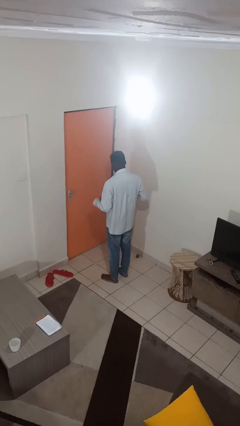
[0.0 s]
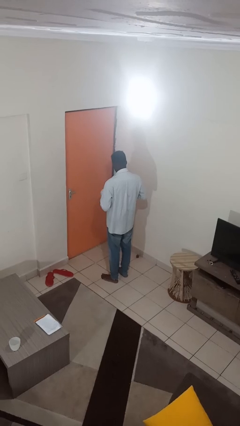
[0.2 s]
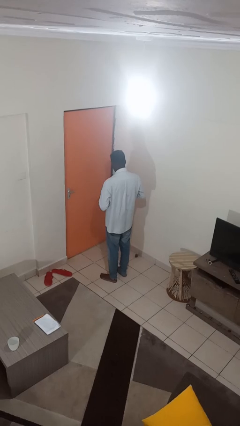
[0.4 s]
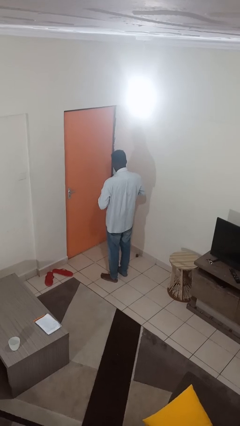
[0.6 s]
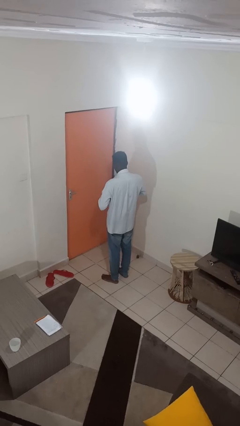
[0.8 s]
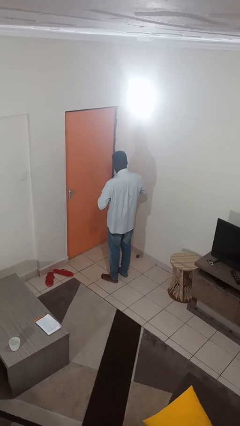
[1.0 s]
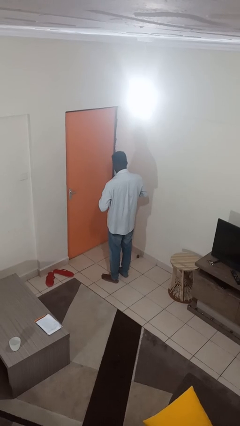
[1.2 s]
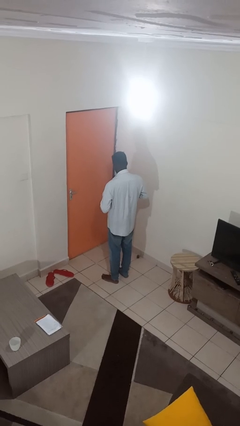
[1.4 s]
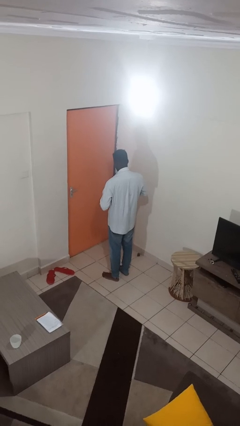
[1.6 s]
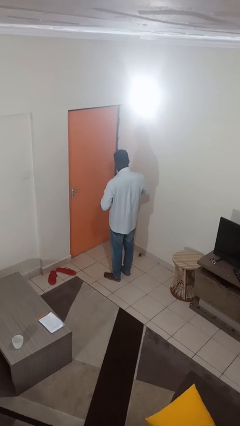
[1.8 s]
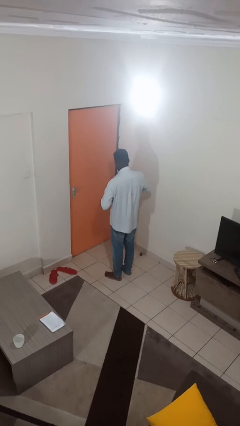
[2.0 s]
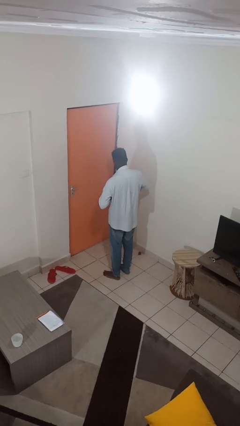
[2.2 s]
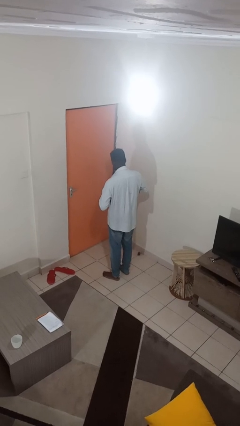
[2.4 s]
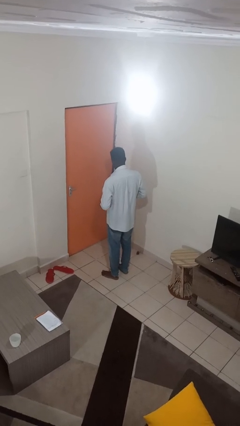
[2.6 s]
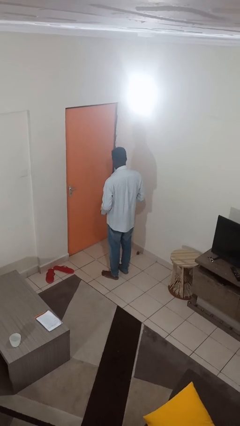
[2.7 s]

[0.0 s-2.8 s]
person buttons shirt

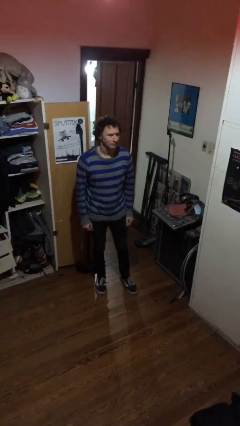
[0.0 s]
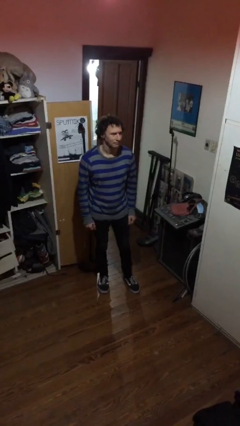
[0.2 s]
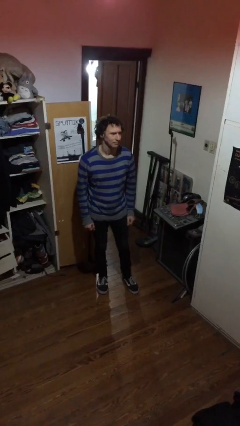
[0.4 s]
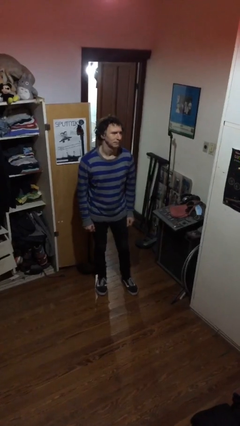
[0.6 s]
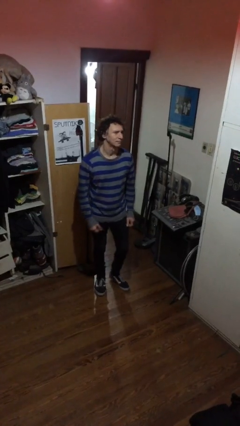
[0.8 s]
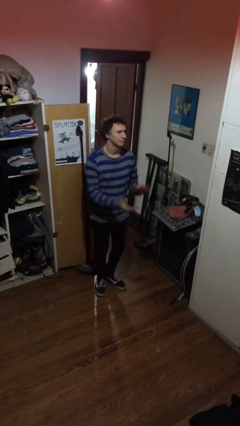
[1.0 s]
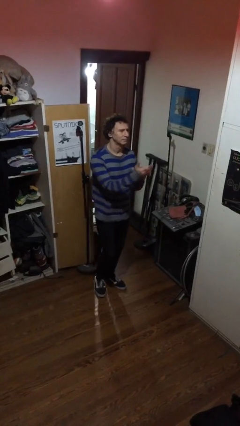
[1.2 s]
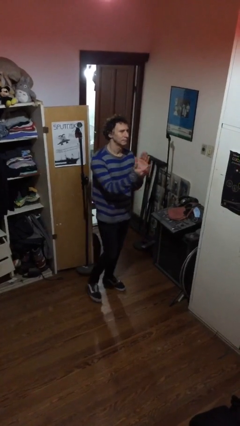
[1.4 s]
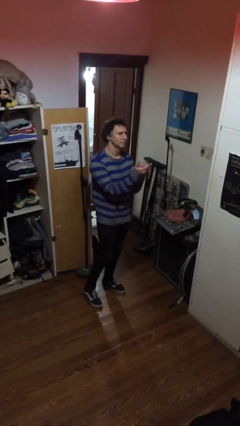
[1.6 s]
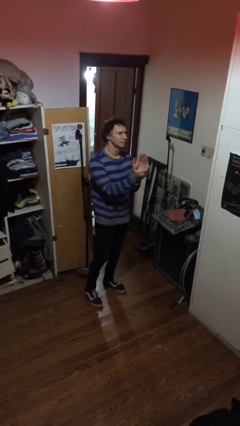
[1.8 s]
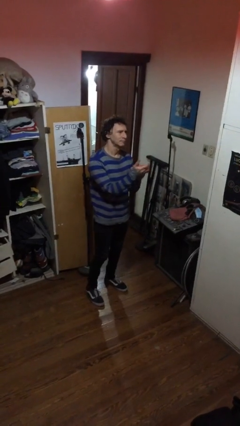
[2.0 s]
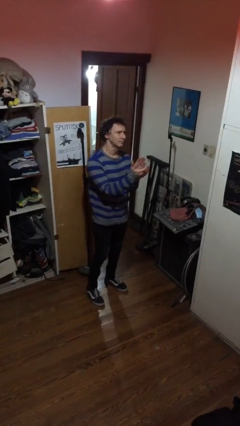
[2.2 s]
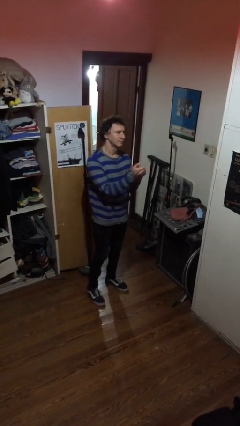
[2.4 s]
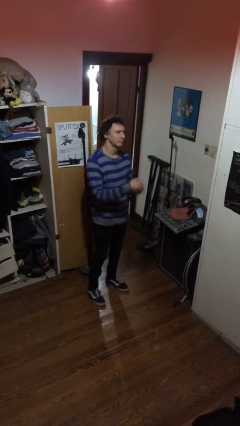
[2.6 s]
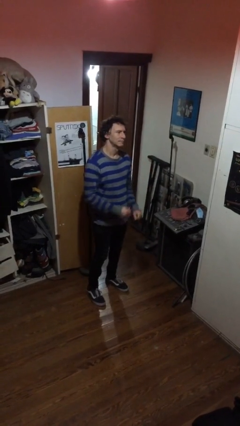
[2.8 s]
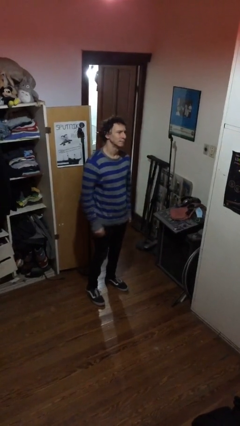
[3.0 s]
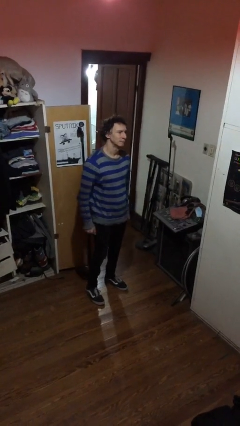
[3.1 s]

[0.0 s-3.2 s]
person claps hands

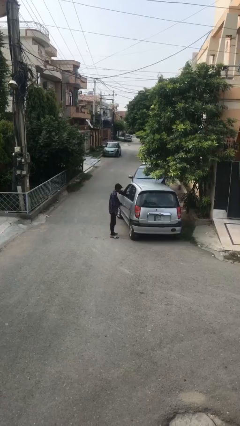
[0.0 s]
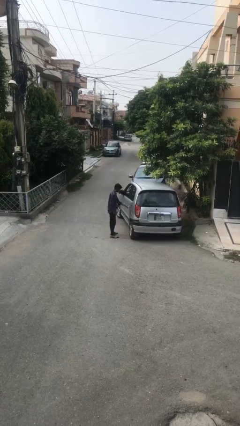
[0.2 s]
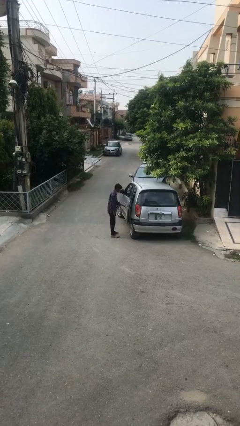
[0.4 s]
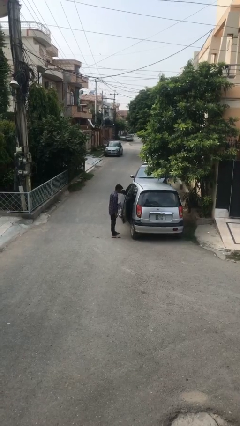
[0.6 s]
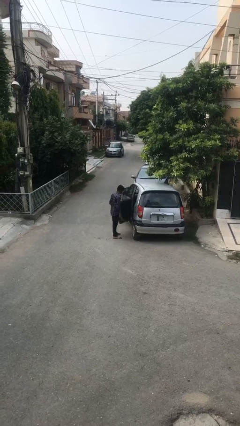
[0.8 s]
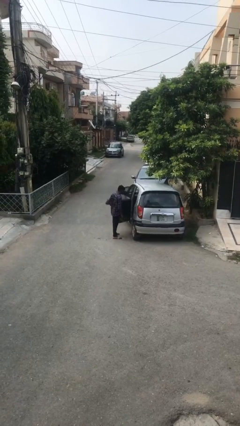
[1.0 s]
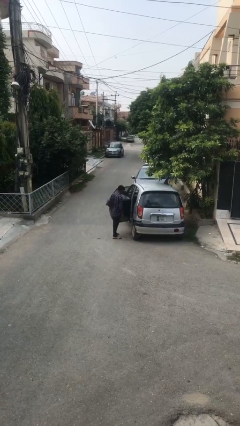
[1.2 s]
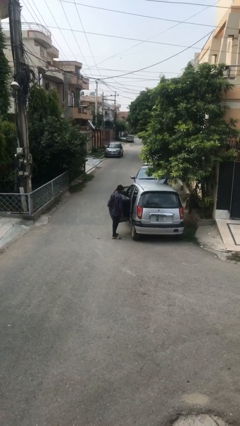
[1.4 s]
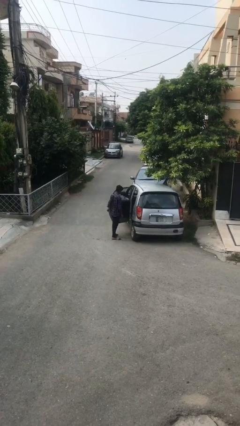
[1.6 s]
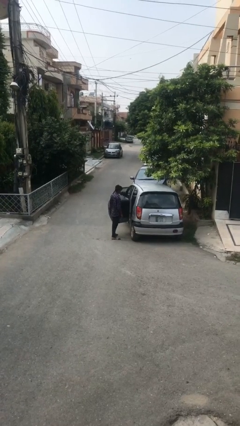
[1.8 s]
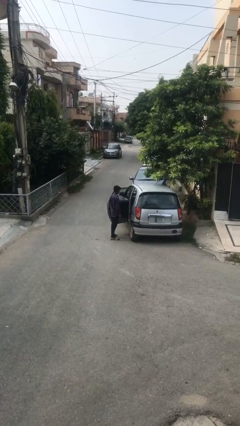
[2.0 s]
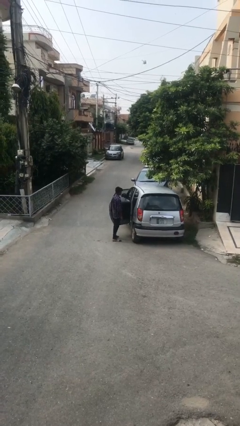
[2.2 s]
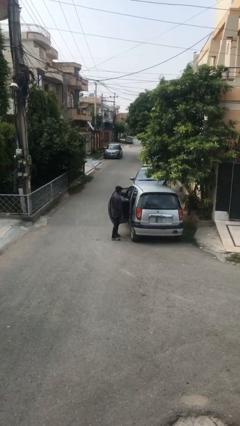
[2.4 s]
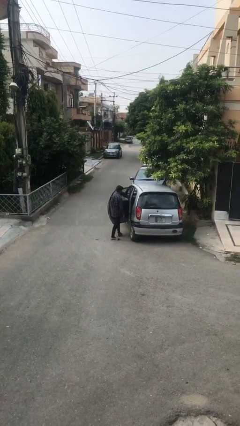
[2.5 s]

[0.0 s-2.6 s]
person opens car door

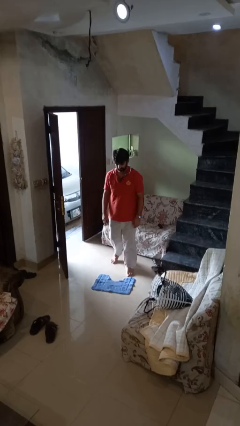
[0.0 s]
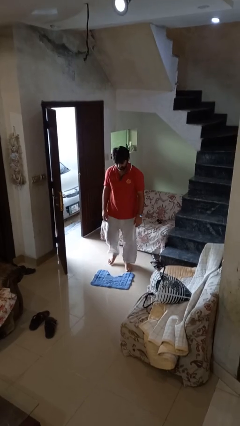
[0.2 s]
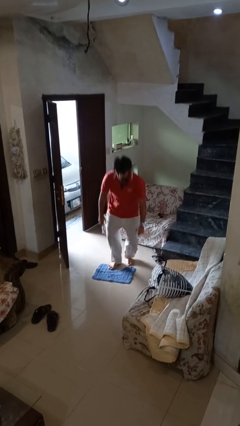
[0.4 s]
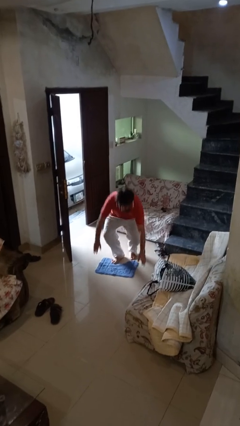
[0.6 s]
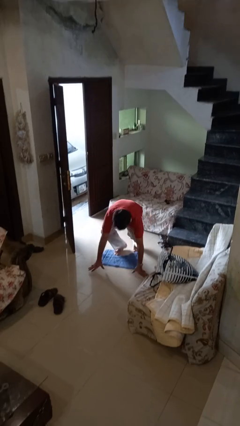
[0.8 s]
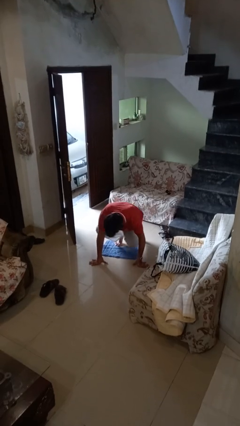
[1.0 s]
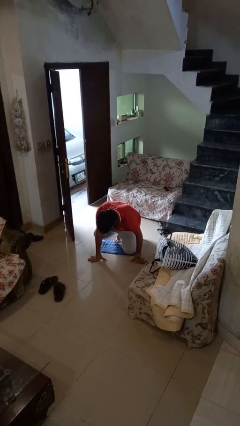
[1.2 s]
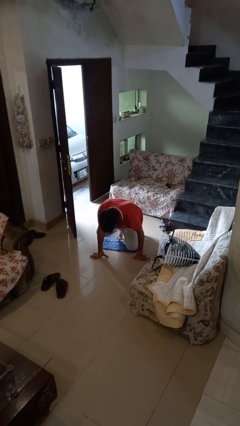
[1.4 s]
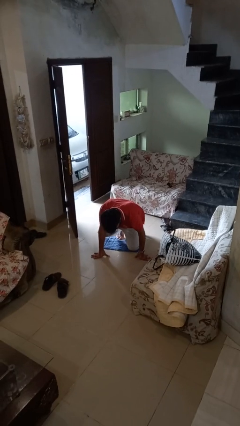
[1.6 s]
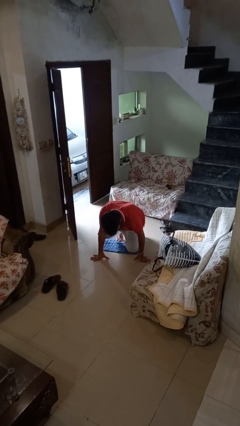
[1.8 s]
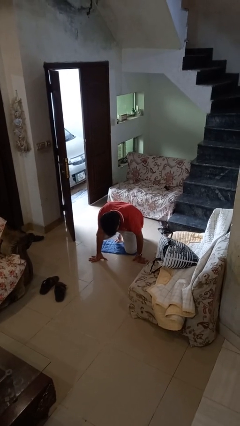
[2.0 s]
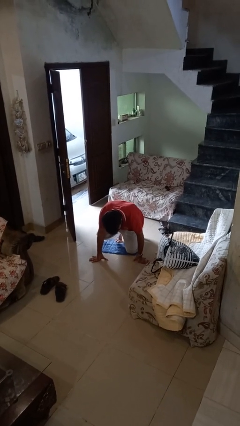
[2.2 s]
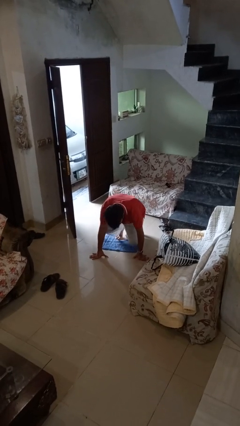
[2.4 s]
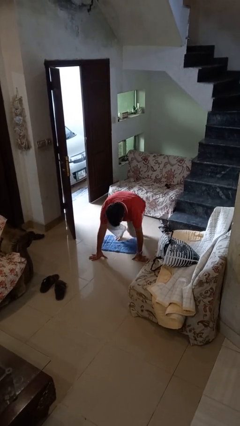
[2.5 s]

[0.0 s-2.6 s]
person trips on object on floor

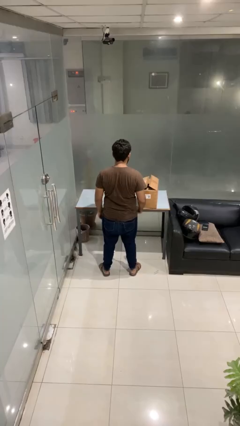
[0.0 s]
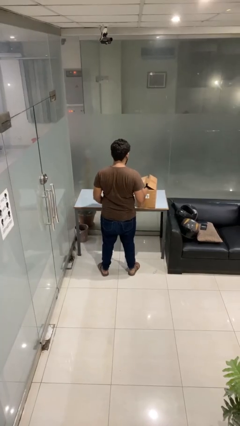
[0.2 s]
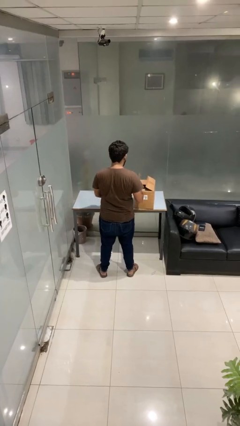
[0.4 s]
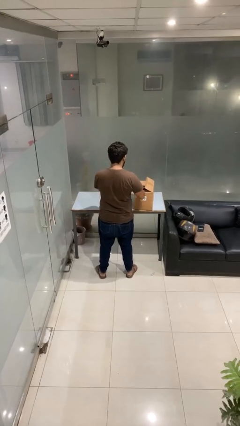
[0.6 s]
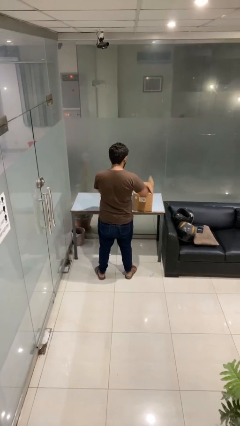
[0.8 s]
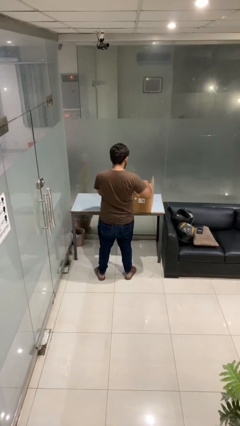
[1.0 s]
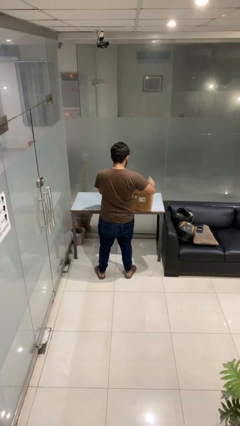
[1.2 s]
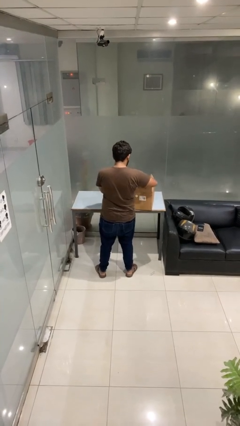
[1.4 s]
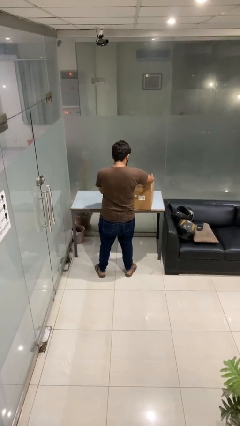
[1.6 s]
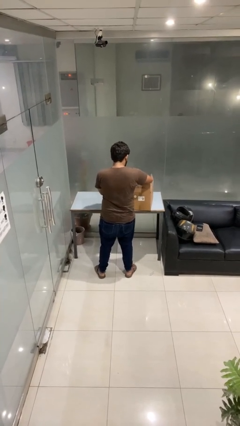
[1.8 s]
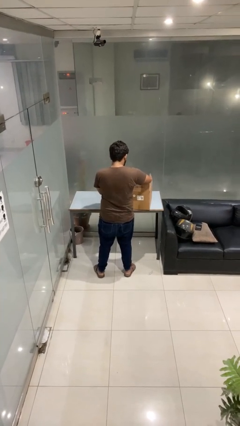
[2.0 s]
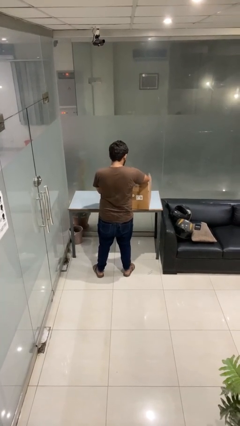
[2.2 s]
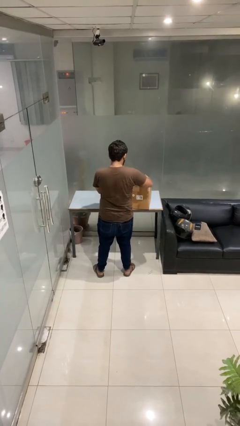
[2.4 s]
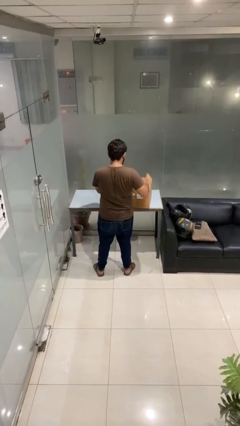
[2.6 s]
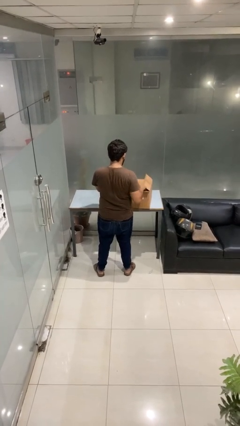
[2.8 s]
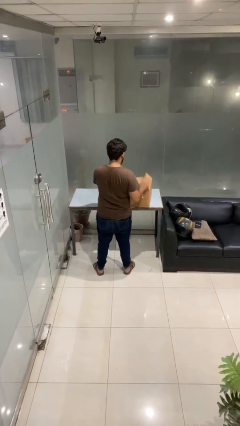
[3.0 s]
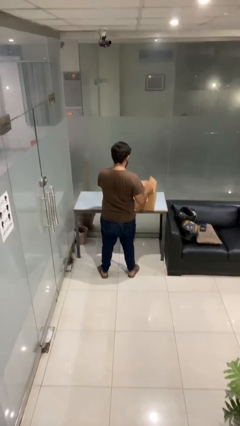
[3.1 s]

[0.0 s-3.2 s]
person searches in box

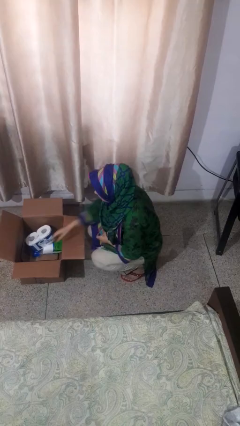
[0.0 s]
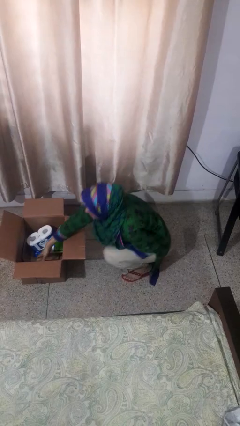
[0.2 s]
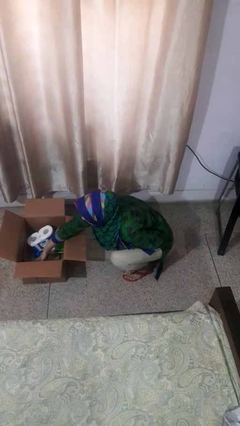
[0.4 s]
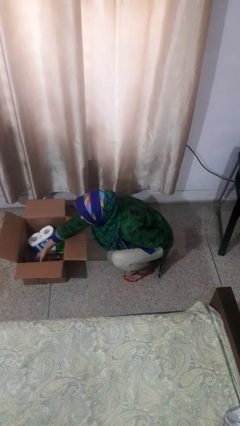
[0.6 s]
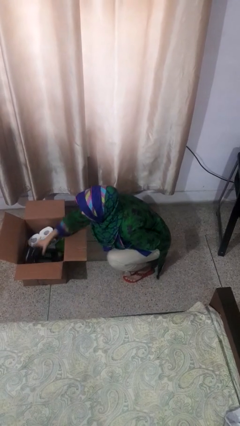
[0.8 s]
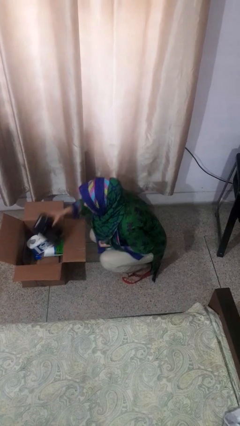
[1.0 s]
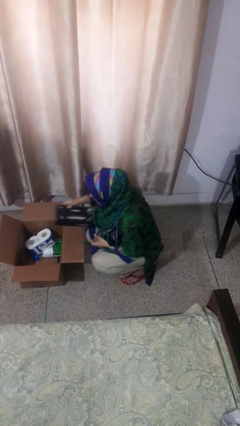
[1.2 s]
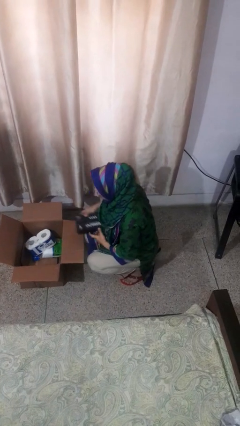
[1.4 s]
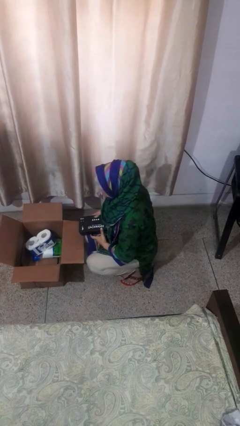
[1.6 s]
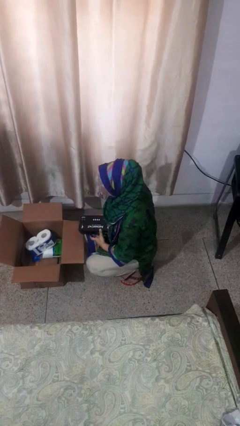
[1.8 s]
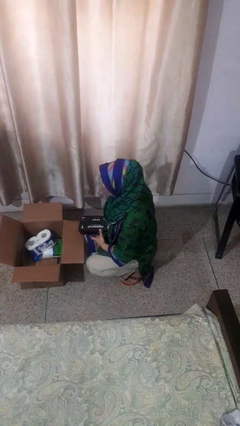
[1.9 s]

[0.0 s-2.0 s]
person takes object from box

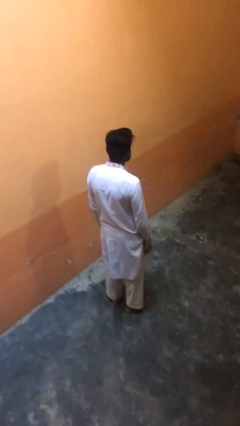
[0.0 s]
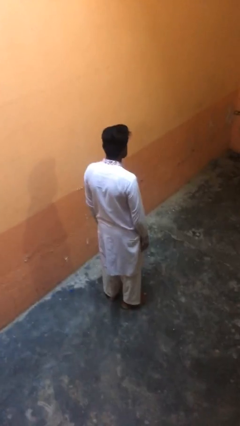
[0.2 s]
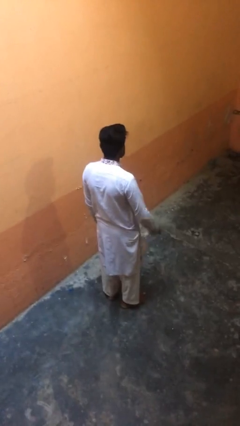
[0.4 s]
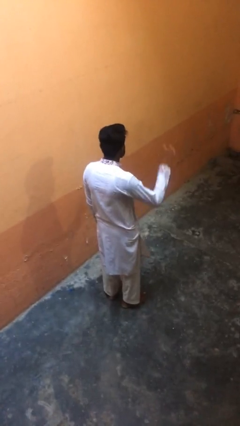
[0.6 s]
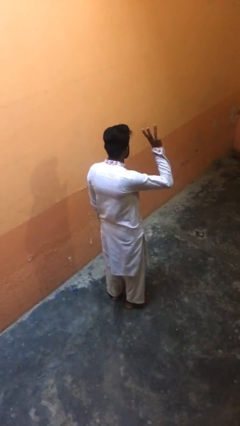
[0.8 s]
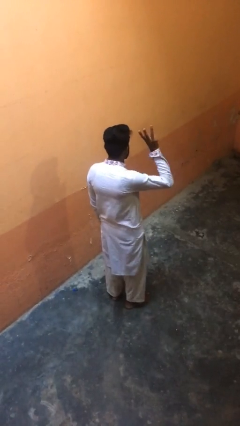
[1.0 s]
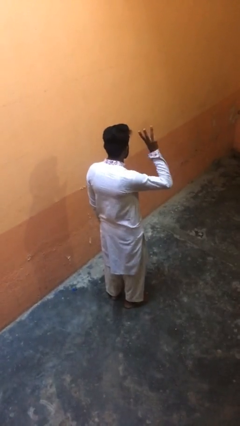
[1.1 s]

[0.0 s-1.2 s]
person gestures number three
